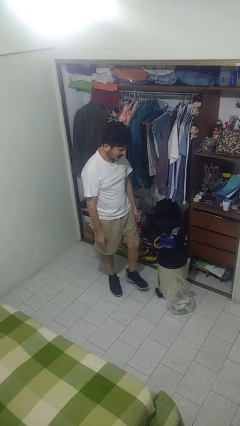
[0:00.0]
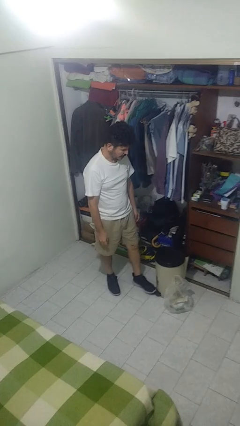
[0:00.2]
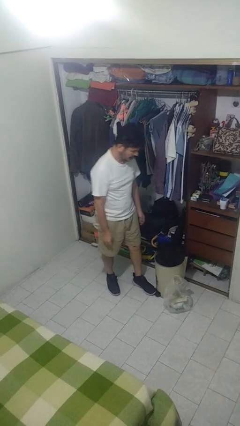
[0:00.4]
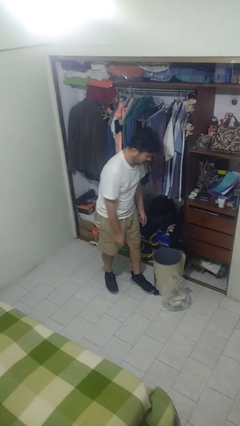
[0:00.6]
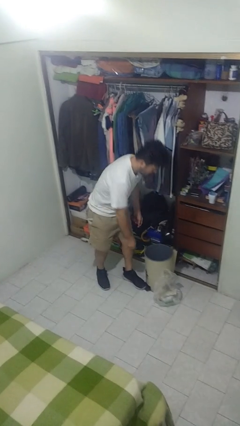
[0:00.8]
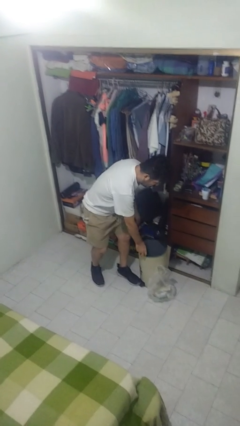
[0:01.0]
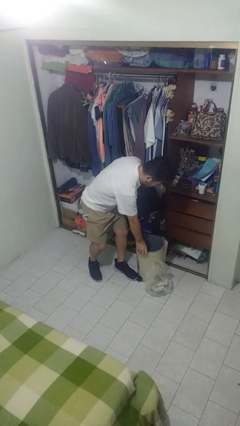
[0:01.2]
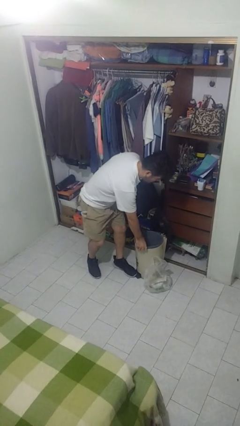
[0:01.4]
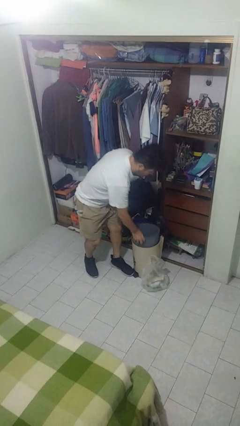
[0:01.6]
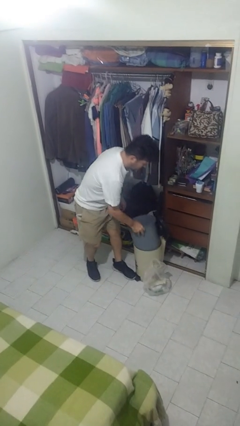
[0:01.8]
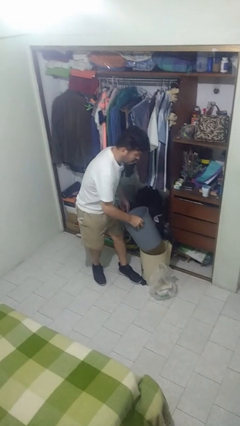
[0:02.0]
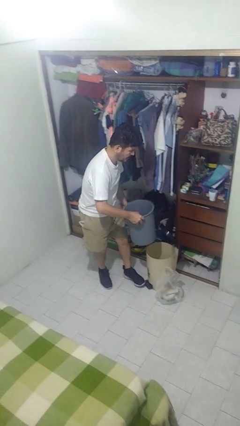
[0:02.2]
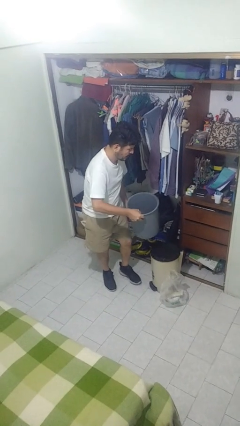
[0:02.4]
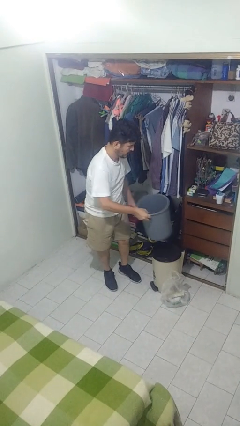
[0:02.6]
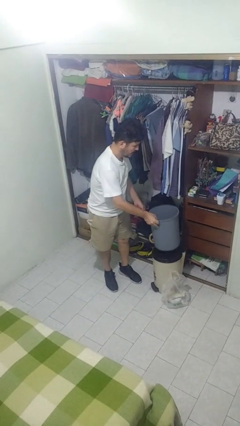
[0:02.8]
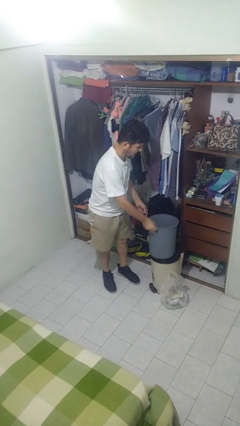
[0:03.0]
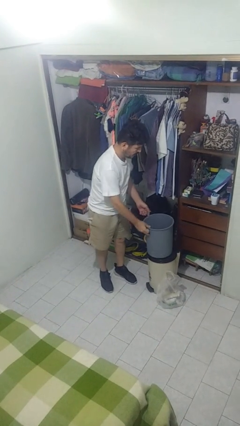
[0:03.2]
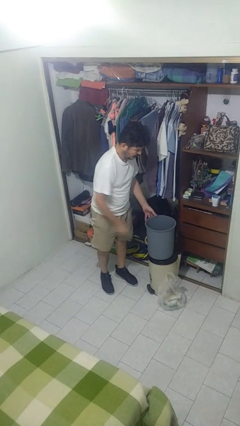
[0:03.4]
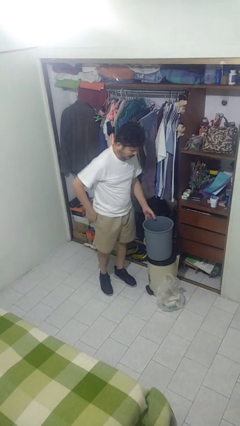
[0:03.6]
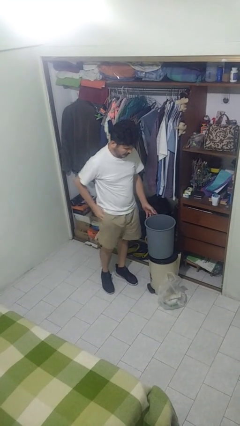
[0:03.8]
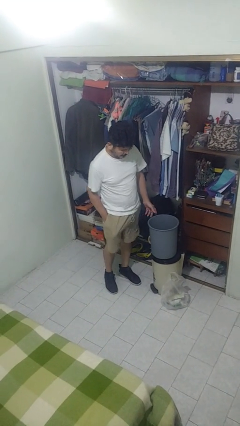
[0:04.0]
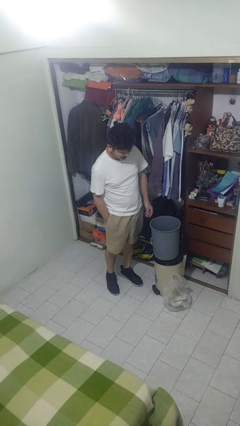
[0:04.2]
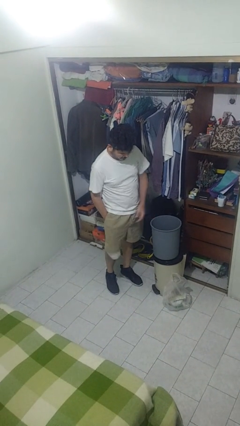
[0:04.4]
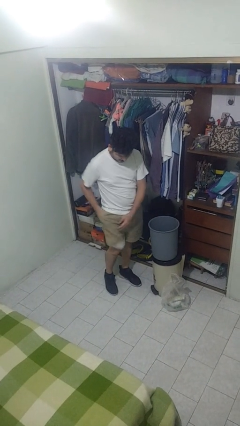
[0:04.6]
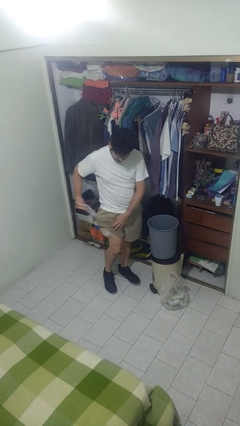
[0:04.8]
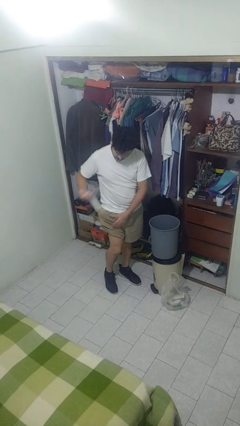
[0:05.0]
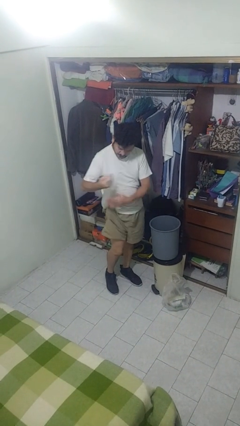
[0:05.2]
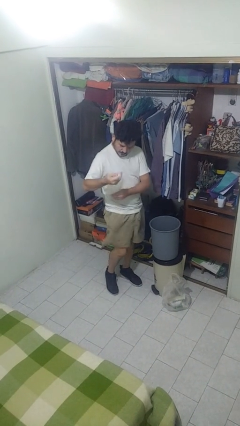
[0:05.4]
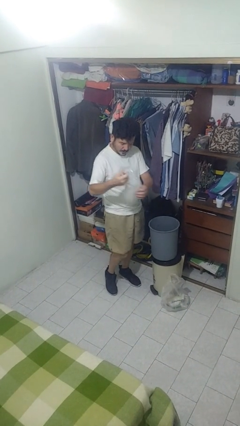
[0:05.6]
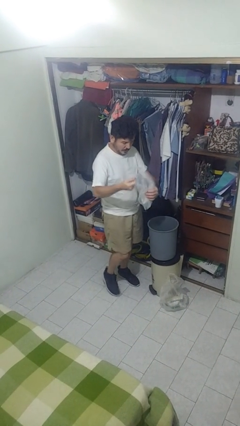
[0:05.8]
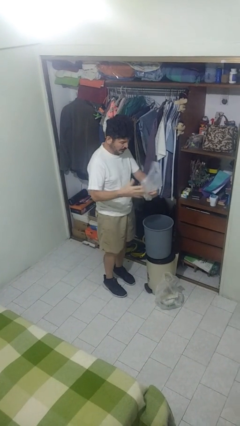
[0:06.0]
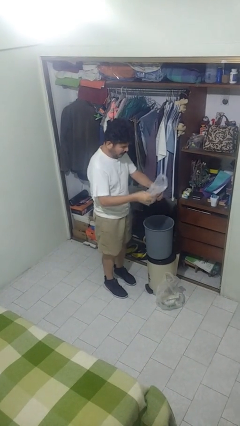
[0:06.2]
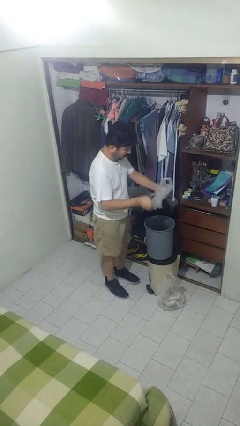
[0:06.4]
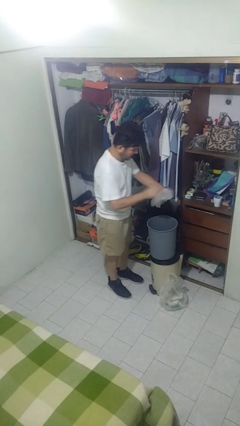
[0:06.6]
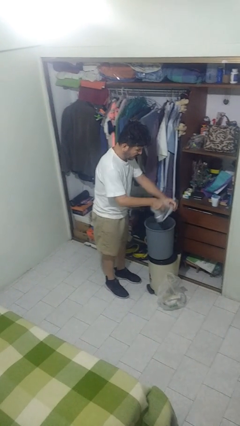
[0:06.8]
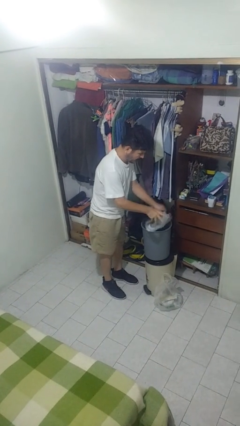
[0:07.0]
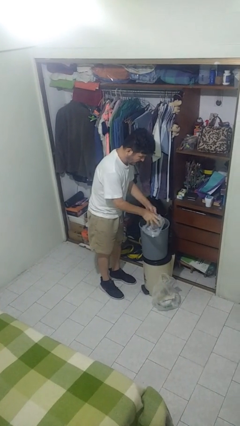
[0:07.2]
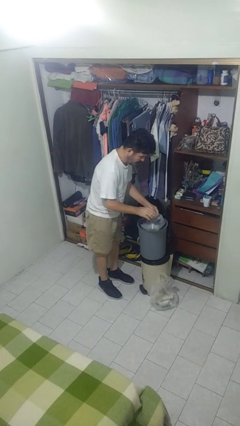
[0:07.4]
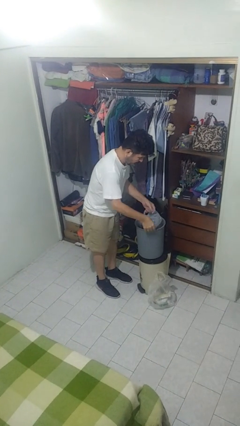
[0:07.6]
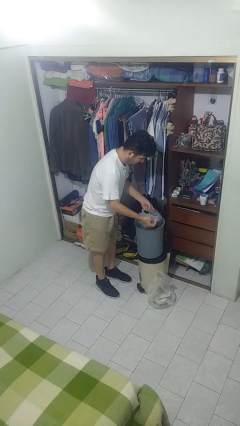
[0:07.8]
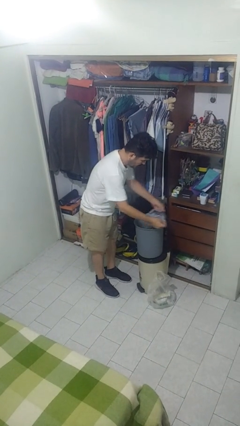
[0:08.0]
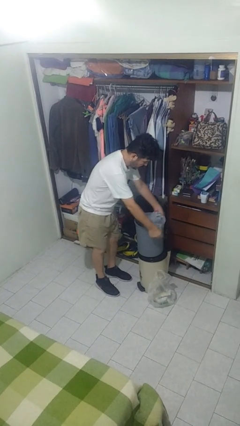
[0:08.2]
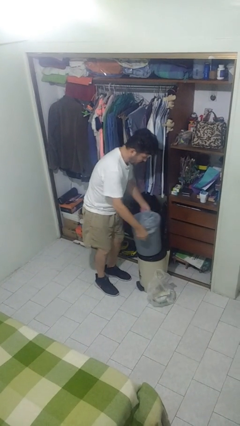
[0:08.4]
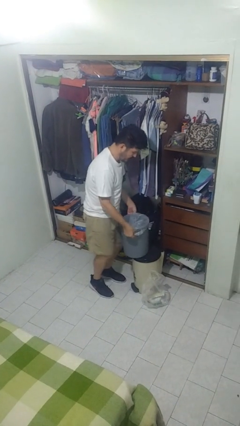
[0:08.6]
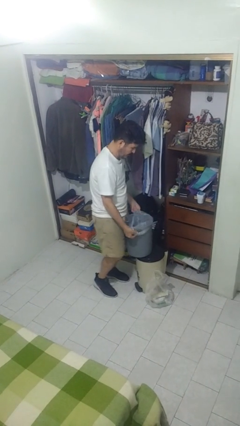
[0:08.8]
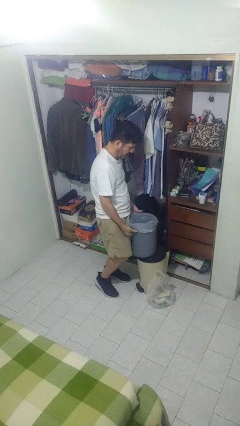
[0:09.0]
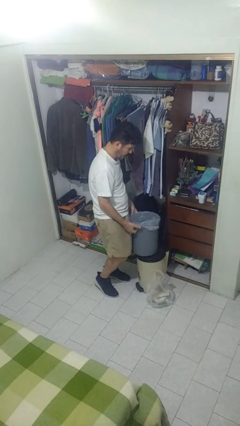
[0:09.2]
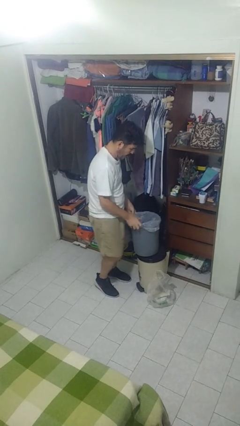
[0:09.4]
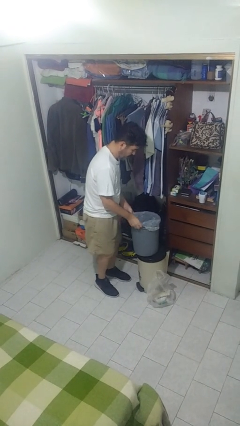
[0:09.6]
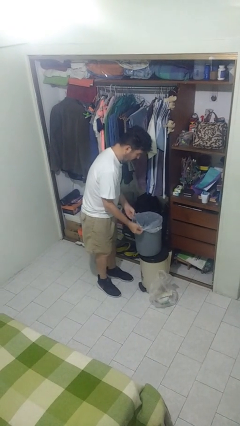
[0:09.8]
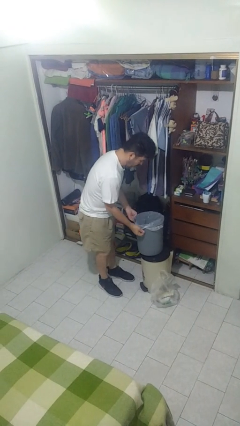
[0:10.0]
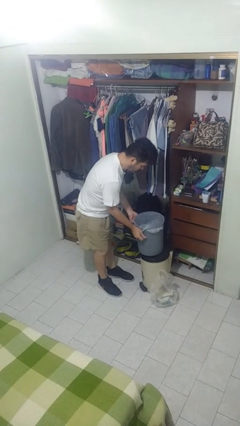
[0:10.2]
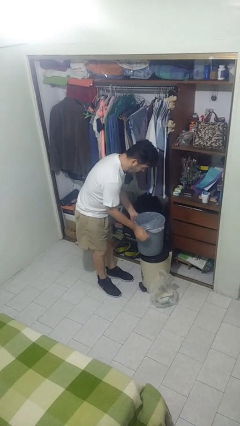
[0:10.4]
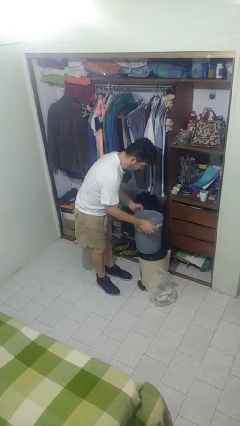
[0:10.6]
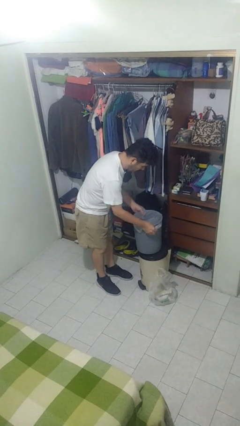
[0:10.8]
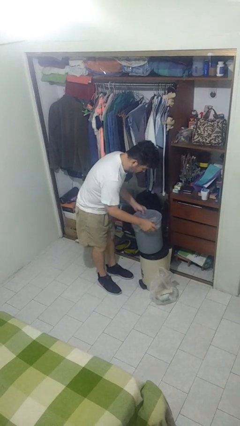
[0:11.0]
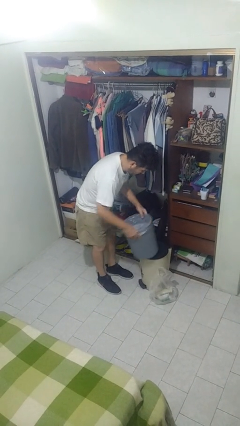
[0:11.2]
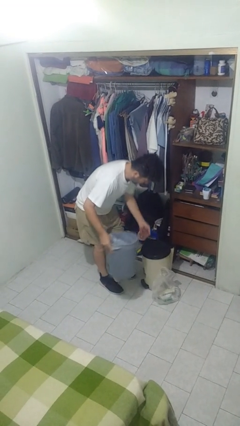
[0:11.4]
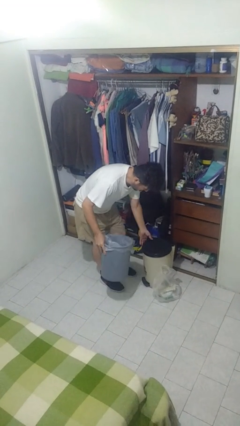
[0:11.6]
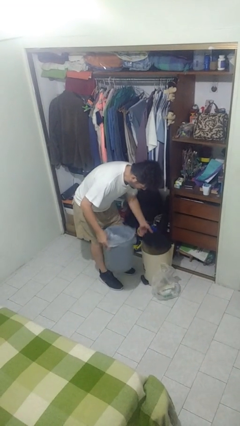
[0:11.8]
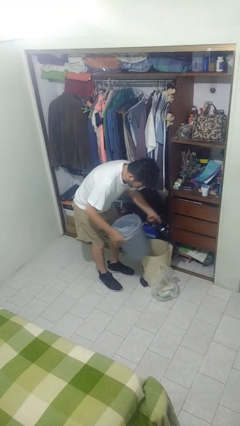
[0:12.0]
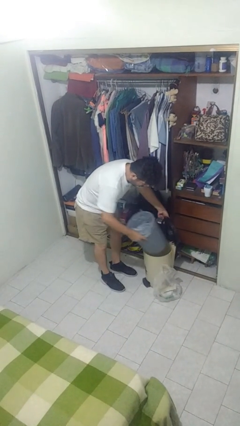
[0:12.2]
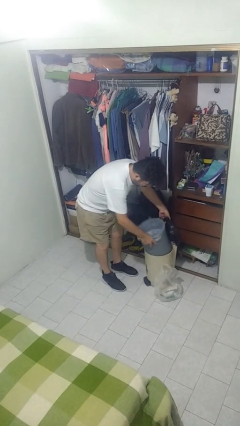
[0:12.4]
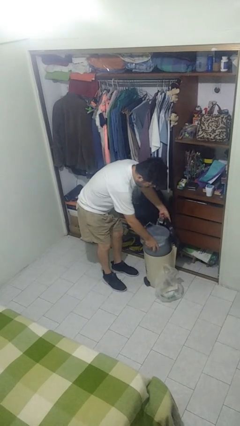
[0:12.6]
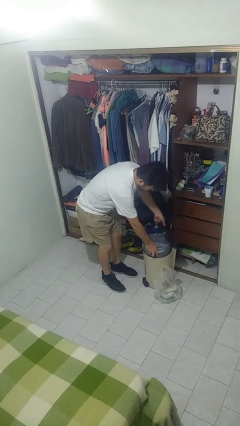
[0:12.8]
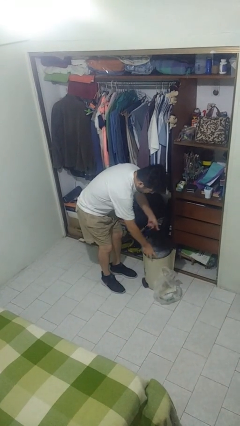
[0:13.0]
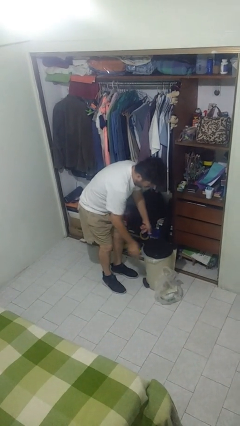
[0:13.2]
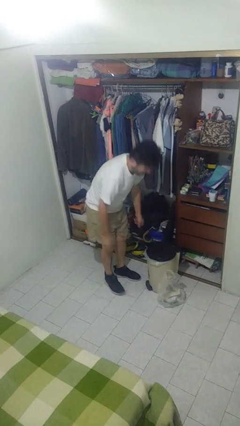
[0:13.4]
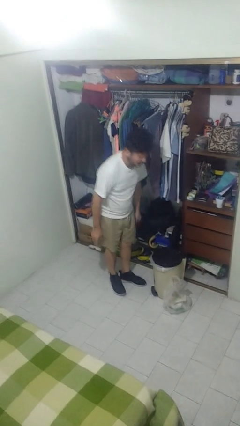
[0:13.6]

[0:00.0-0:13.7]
person inserts trashbag into trashcan

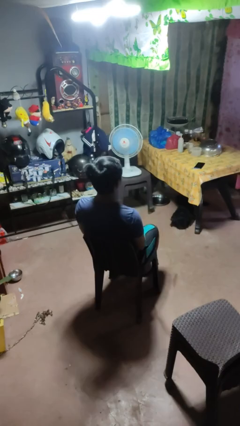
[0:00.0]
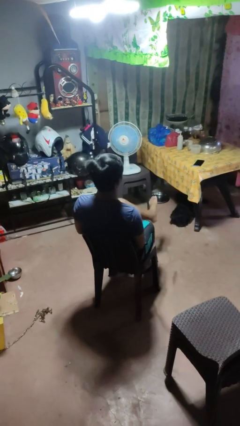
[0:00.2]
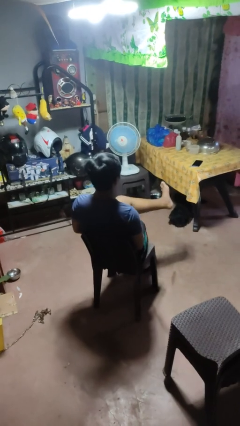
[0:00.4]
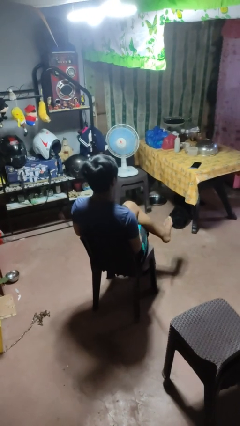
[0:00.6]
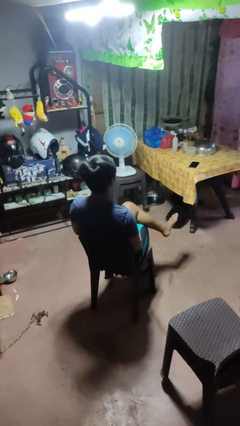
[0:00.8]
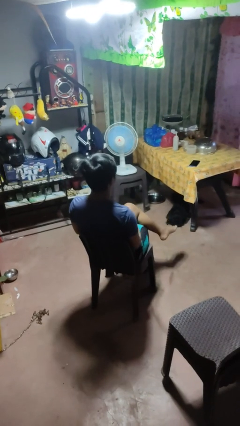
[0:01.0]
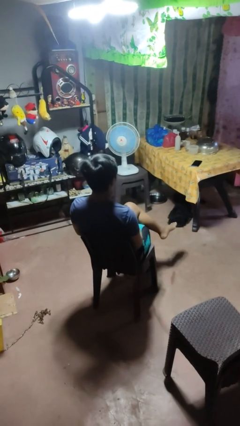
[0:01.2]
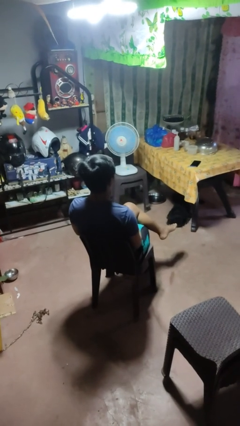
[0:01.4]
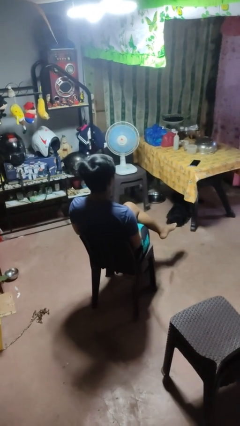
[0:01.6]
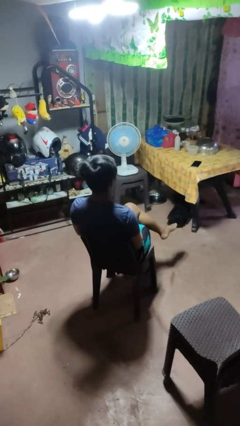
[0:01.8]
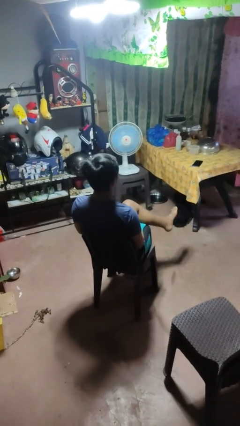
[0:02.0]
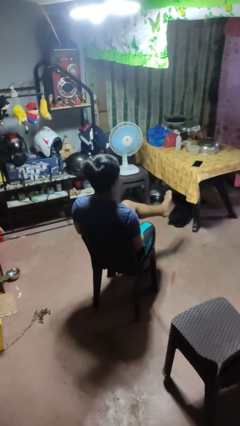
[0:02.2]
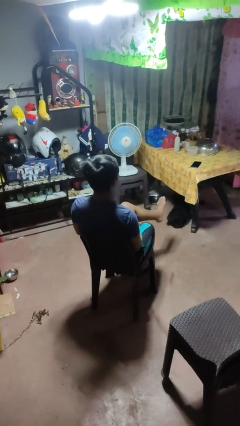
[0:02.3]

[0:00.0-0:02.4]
person crosses legs

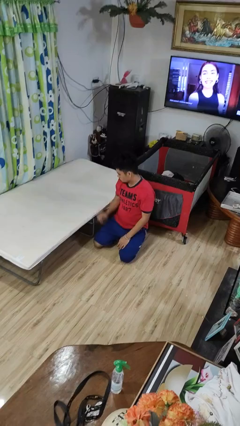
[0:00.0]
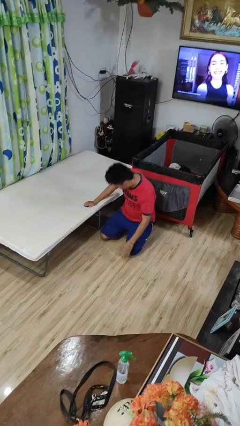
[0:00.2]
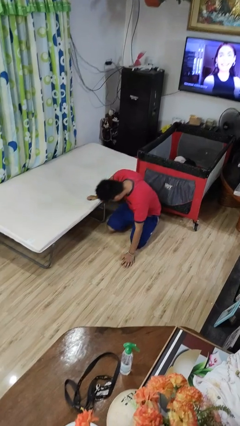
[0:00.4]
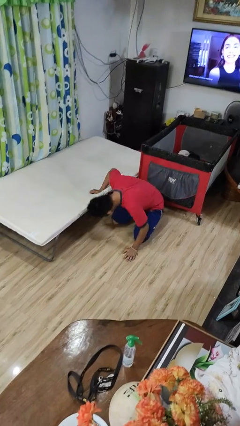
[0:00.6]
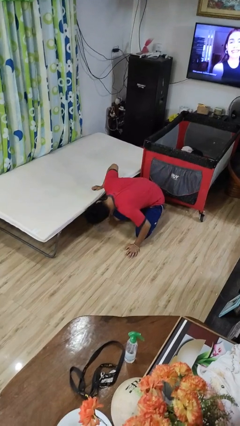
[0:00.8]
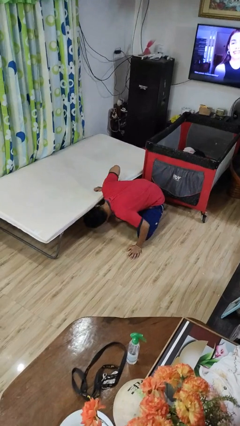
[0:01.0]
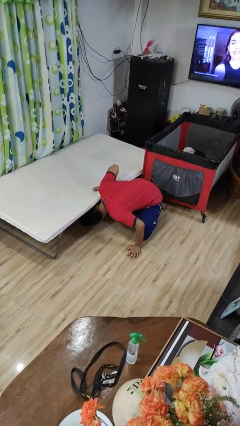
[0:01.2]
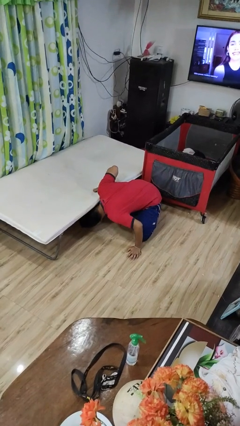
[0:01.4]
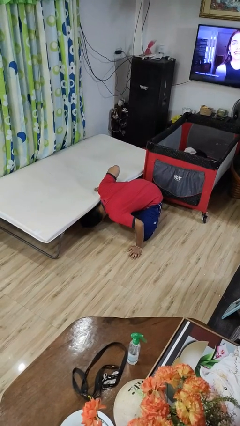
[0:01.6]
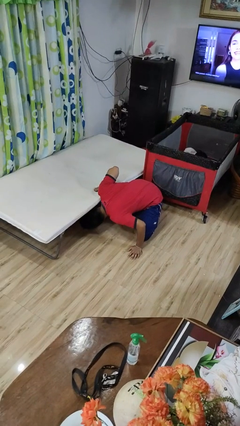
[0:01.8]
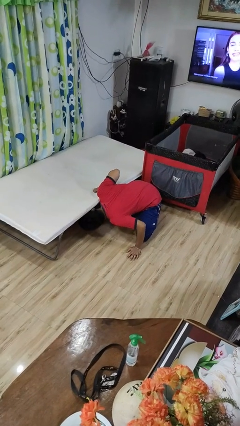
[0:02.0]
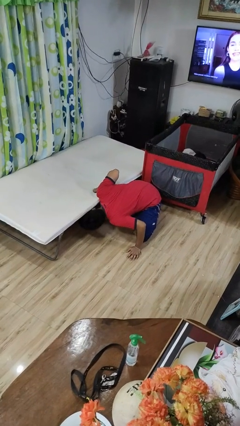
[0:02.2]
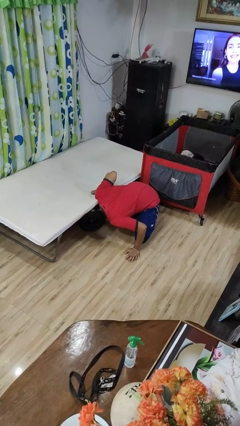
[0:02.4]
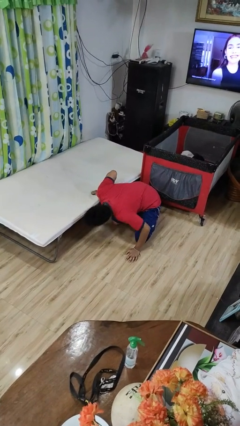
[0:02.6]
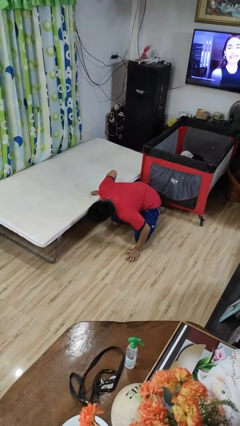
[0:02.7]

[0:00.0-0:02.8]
person searches under bed
